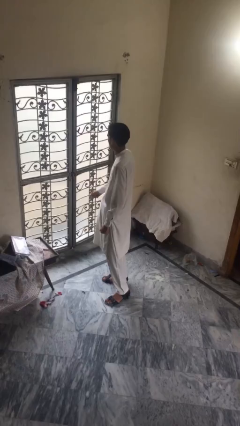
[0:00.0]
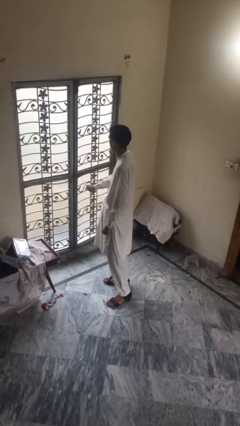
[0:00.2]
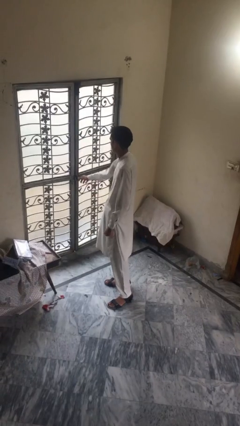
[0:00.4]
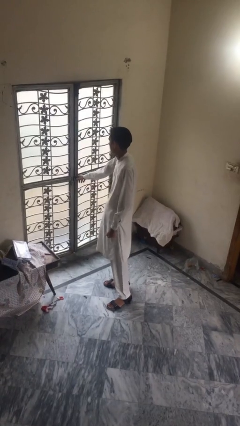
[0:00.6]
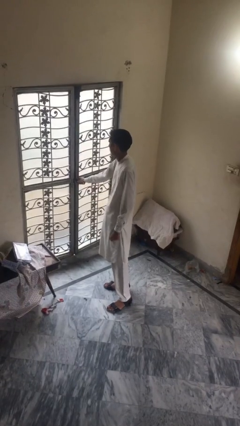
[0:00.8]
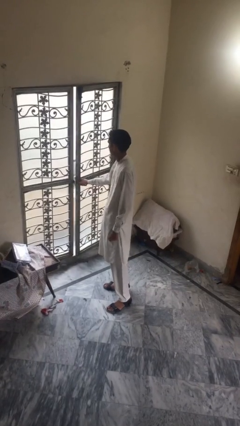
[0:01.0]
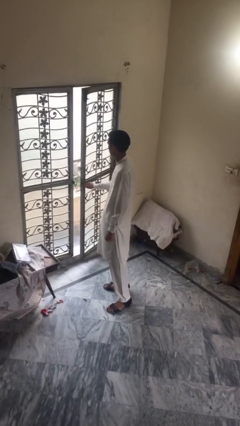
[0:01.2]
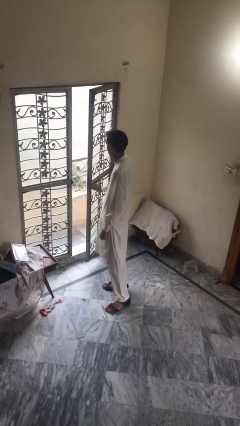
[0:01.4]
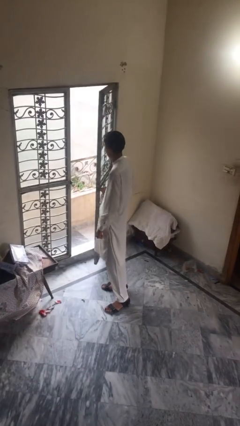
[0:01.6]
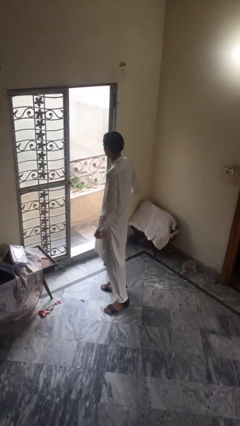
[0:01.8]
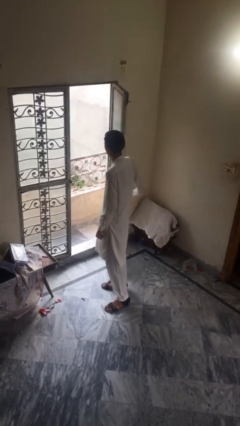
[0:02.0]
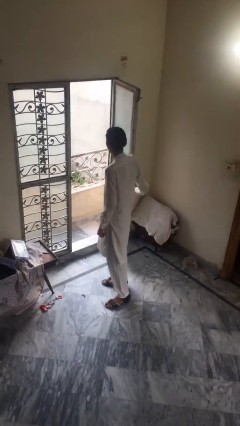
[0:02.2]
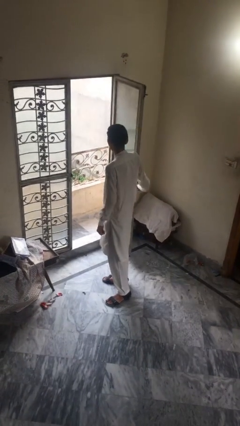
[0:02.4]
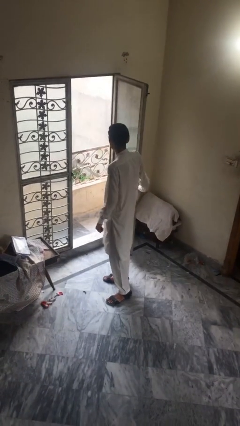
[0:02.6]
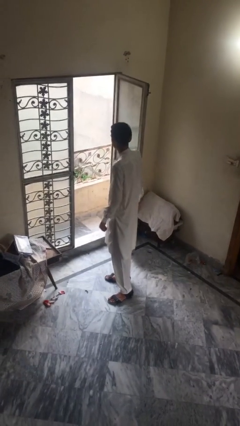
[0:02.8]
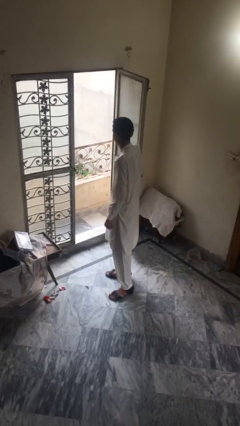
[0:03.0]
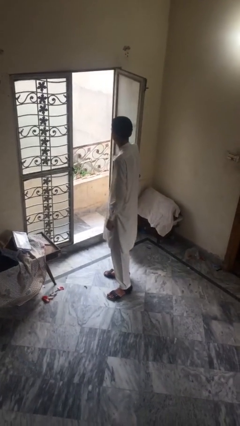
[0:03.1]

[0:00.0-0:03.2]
person opens facility door

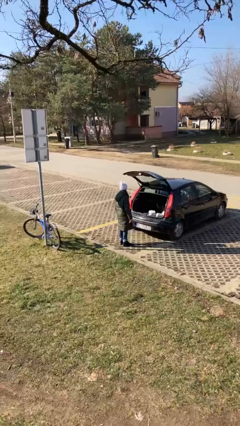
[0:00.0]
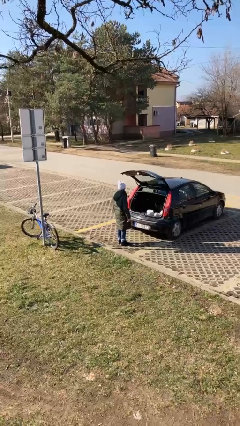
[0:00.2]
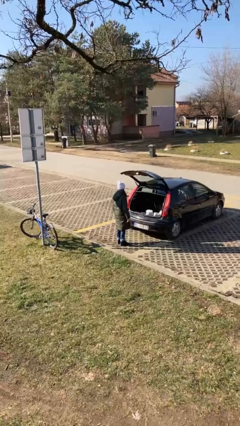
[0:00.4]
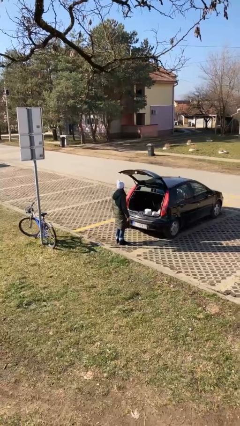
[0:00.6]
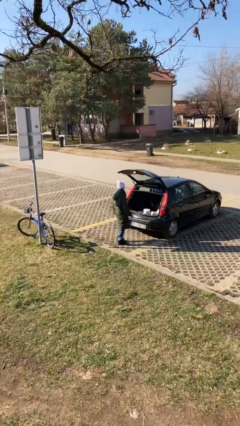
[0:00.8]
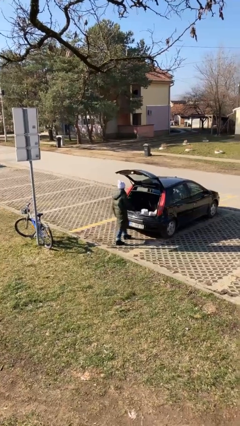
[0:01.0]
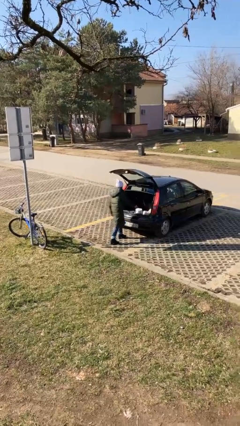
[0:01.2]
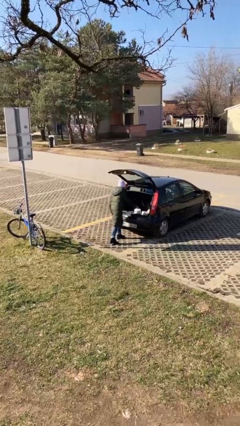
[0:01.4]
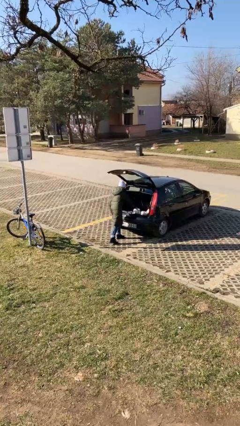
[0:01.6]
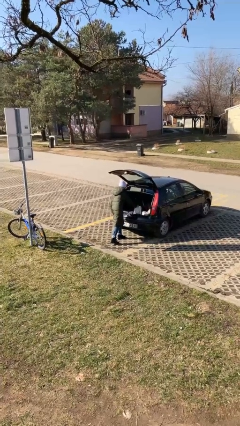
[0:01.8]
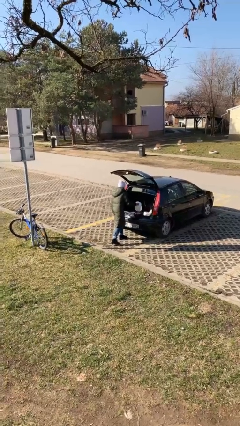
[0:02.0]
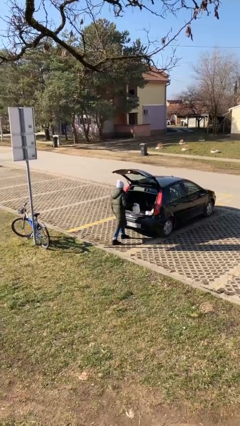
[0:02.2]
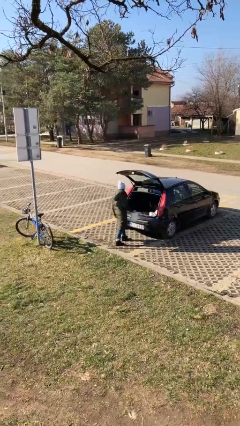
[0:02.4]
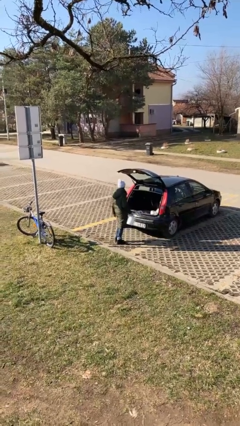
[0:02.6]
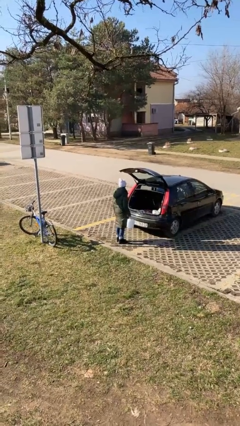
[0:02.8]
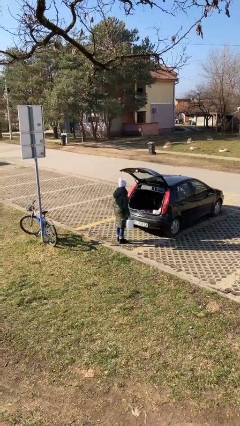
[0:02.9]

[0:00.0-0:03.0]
person unloads car

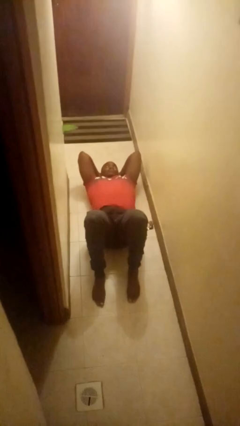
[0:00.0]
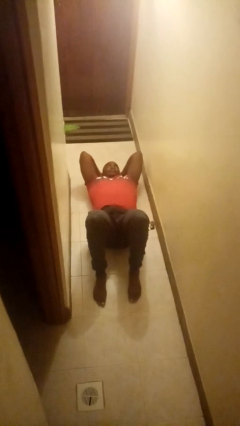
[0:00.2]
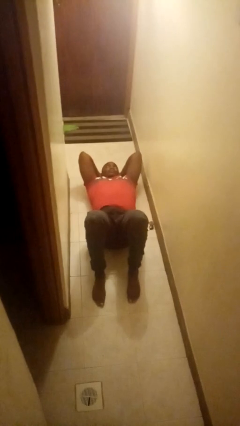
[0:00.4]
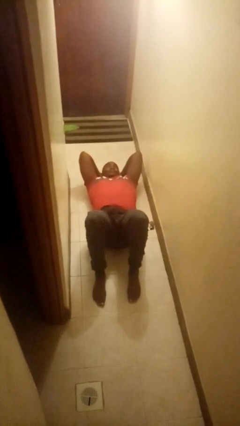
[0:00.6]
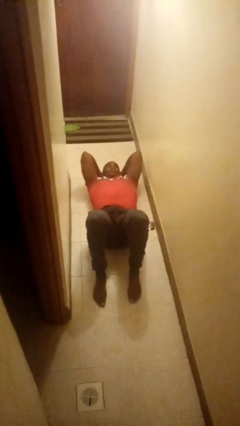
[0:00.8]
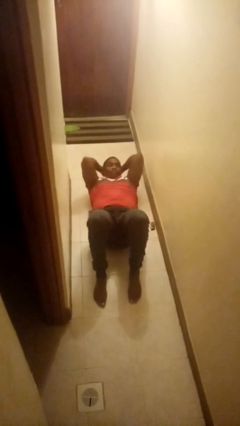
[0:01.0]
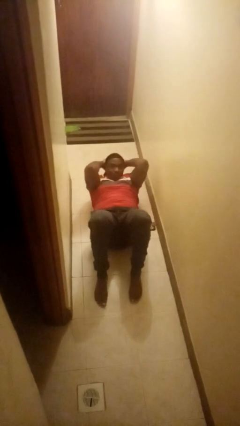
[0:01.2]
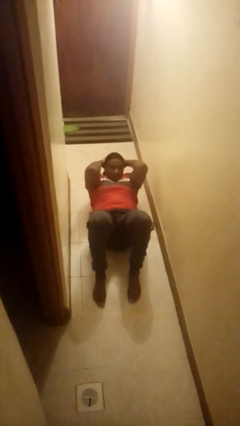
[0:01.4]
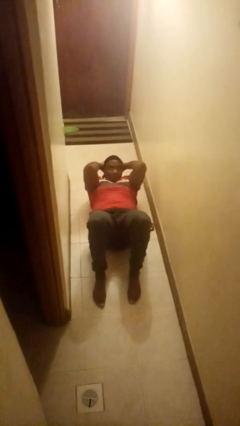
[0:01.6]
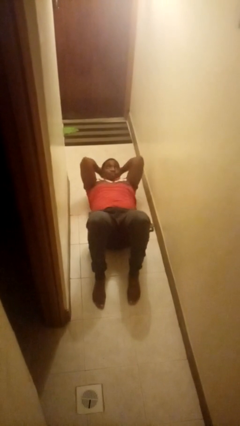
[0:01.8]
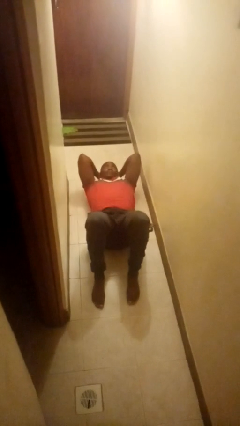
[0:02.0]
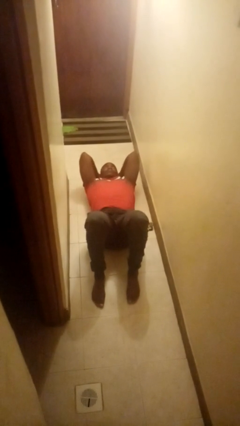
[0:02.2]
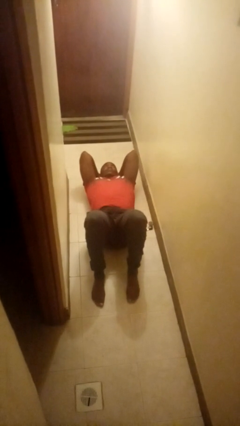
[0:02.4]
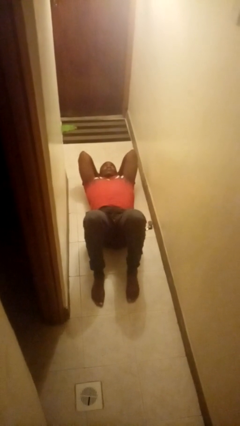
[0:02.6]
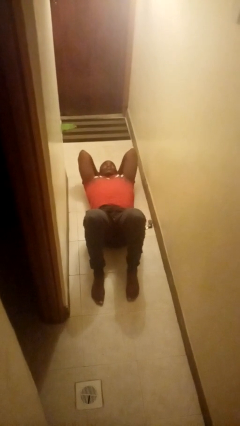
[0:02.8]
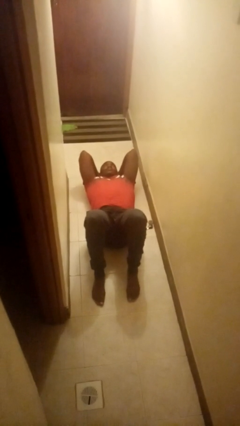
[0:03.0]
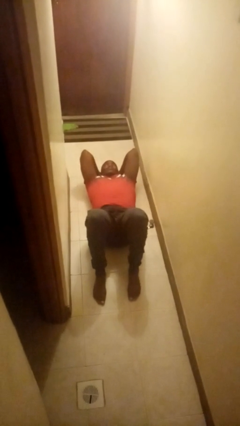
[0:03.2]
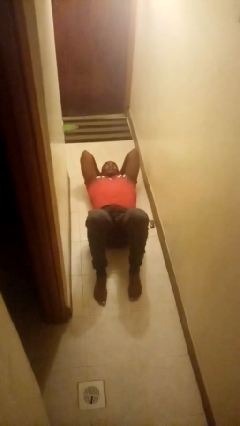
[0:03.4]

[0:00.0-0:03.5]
person exercises with situp

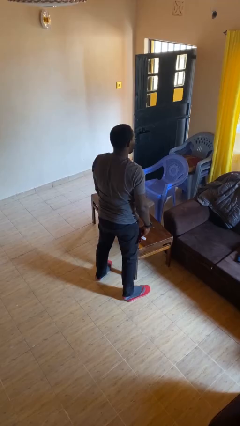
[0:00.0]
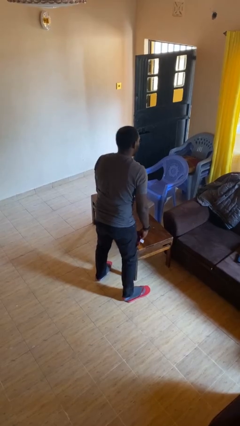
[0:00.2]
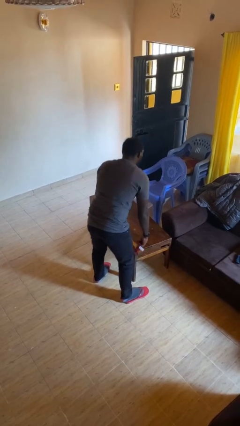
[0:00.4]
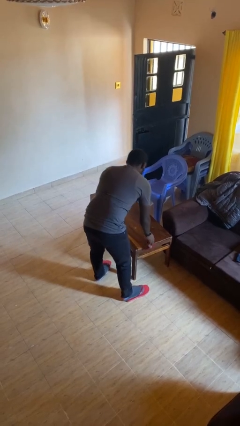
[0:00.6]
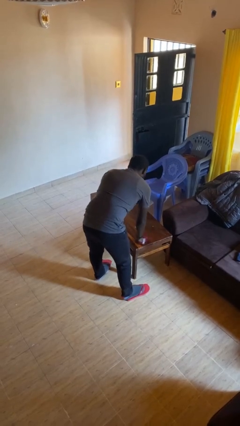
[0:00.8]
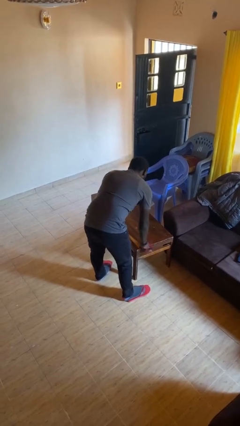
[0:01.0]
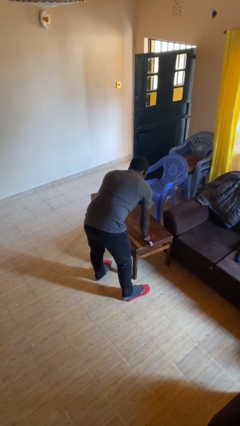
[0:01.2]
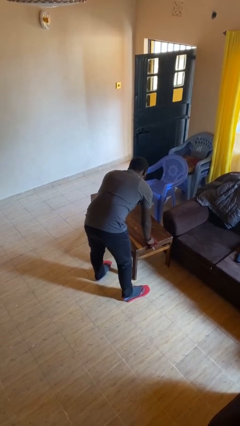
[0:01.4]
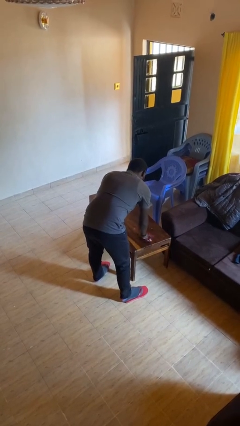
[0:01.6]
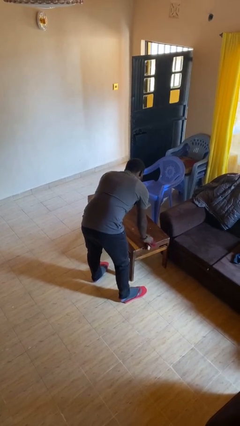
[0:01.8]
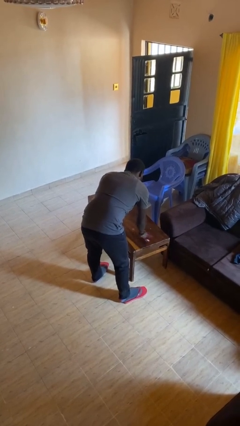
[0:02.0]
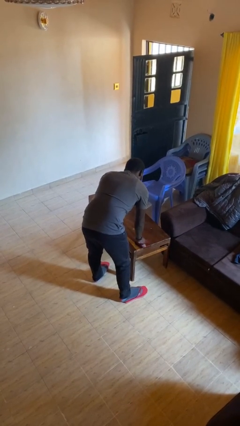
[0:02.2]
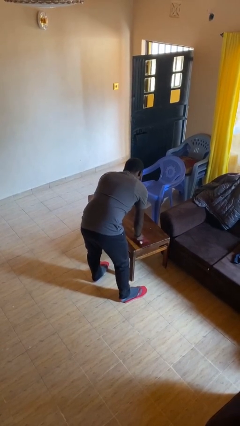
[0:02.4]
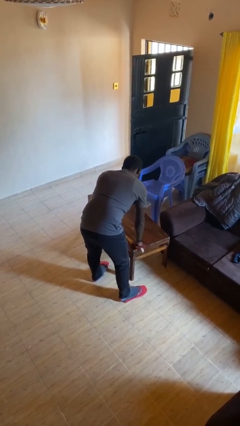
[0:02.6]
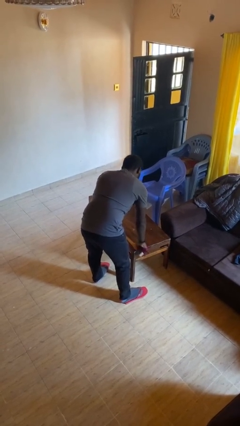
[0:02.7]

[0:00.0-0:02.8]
person cleans table with rag

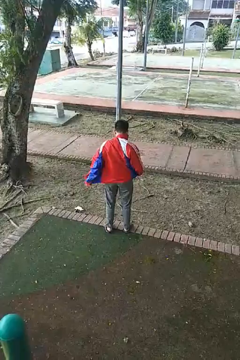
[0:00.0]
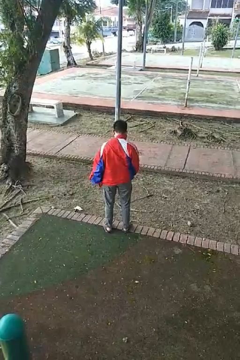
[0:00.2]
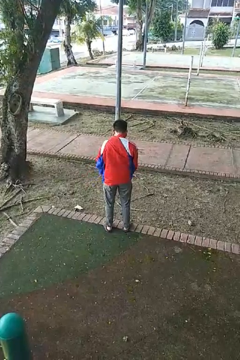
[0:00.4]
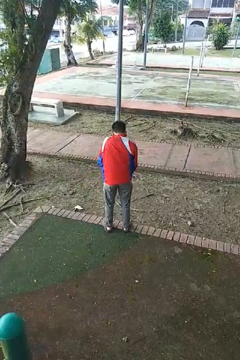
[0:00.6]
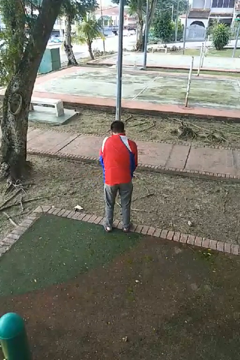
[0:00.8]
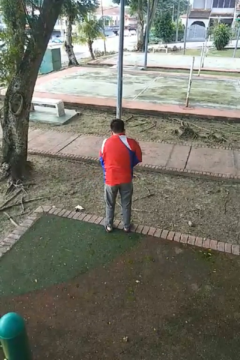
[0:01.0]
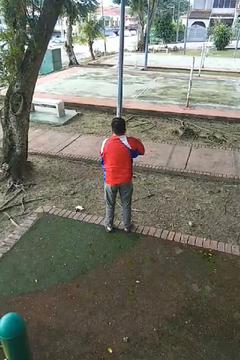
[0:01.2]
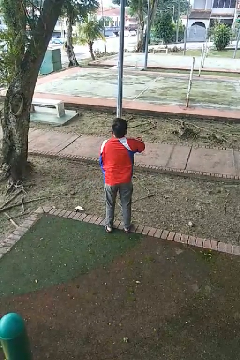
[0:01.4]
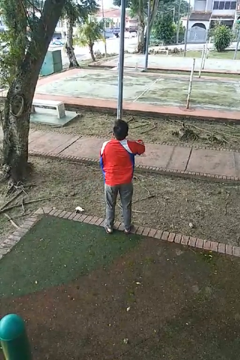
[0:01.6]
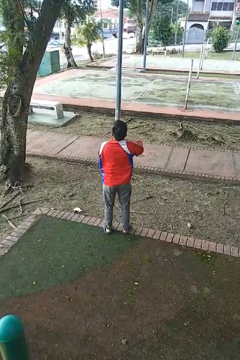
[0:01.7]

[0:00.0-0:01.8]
person zips up jacket

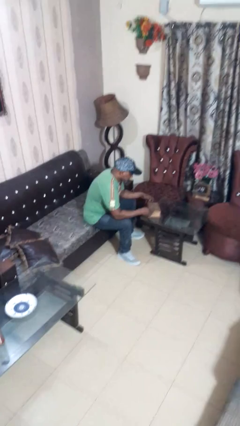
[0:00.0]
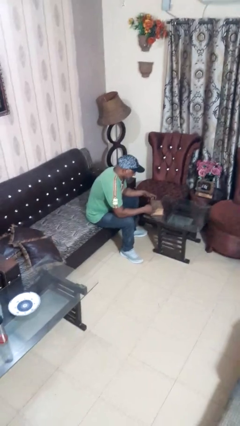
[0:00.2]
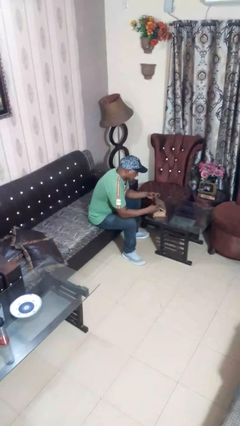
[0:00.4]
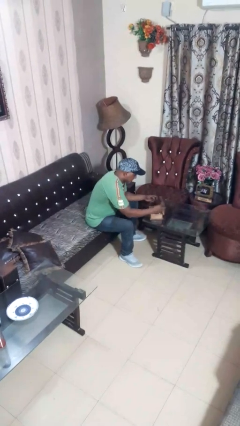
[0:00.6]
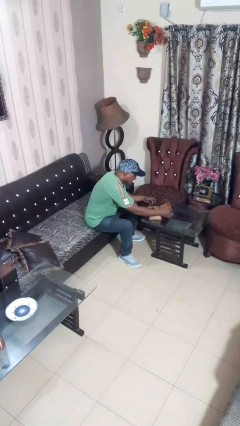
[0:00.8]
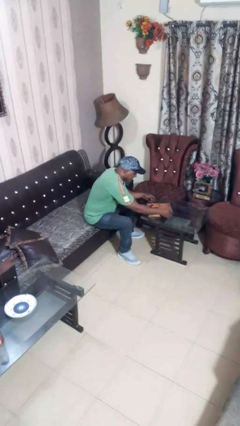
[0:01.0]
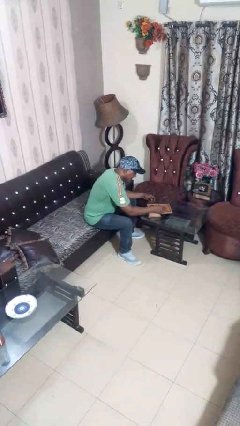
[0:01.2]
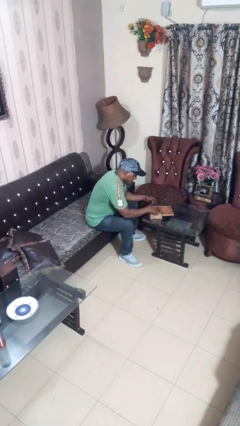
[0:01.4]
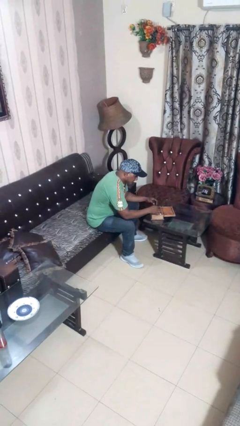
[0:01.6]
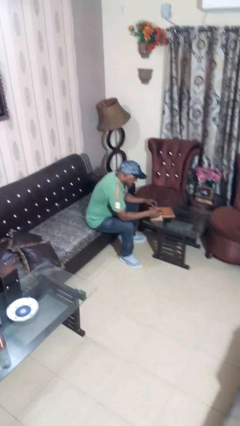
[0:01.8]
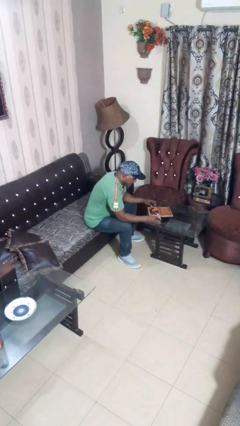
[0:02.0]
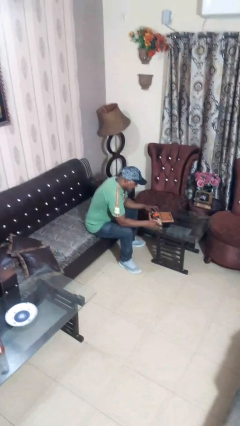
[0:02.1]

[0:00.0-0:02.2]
person opens jewelry box

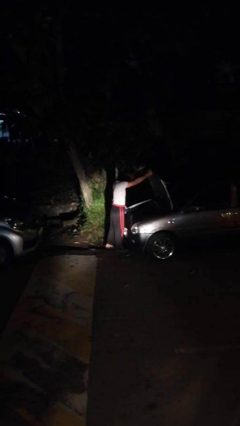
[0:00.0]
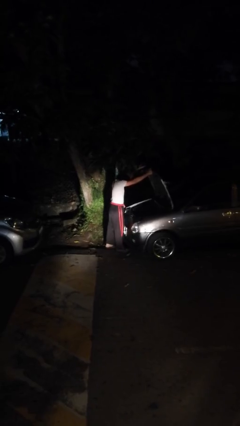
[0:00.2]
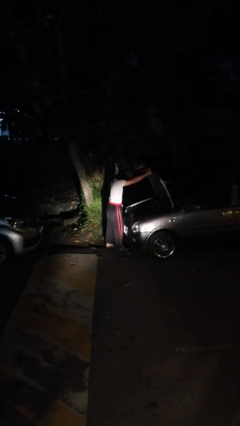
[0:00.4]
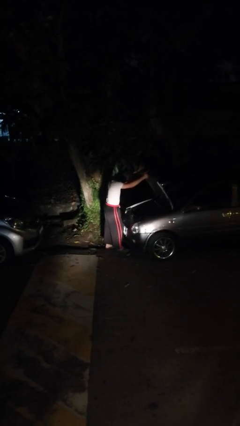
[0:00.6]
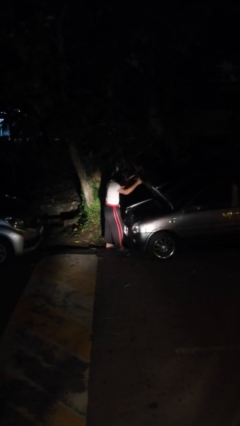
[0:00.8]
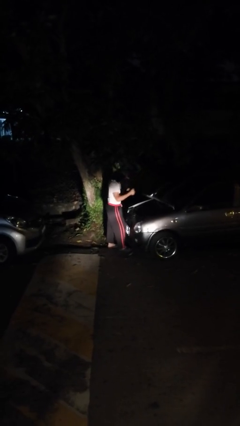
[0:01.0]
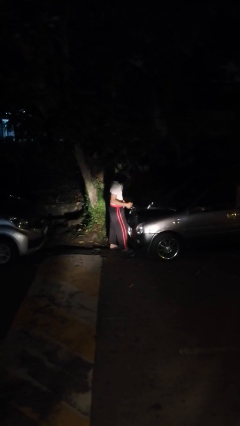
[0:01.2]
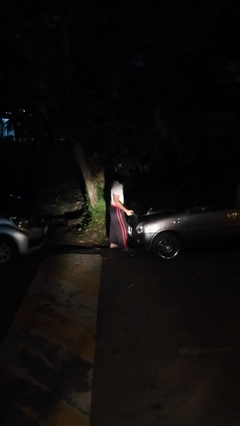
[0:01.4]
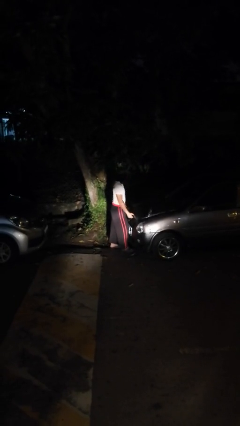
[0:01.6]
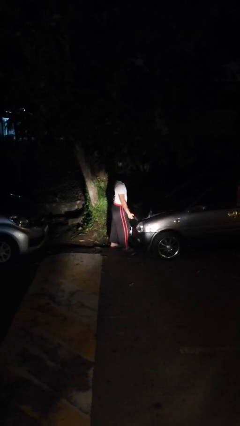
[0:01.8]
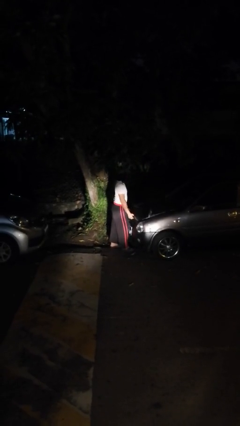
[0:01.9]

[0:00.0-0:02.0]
person closes car hood
